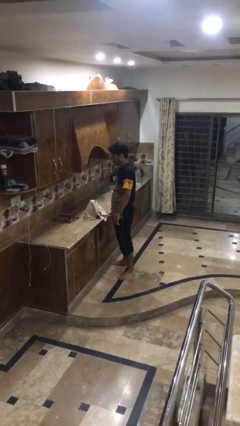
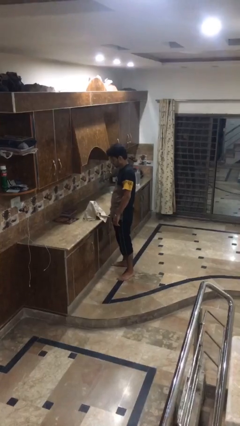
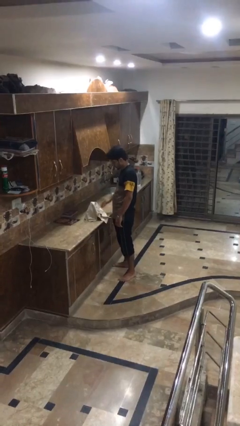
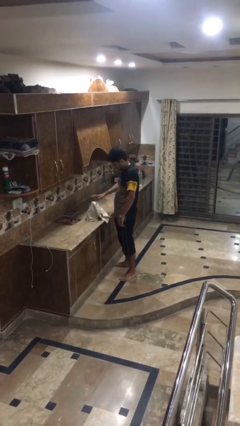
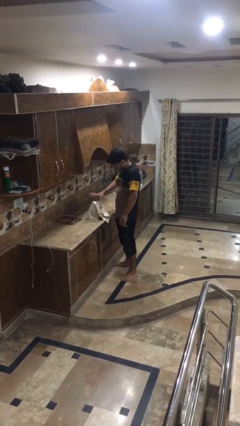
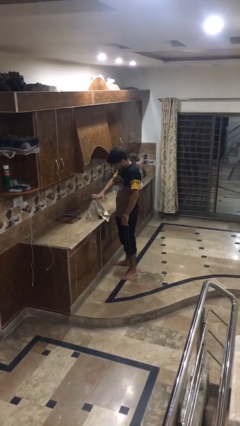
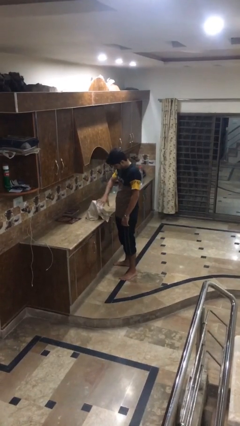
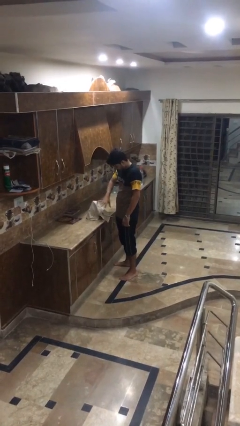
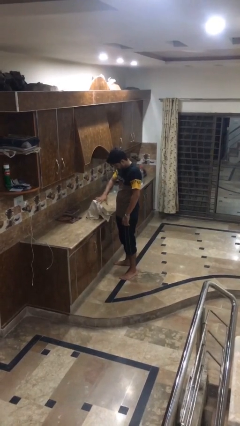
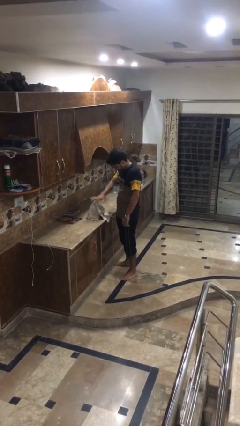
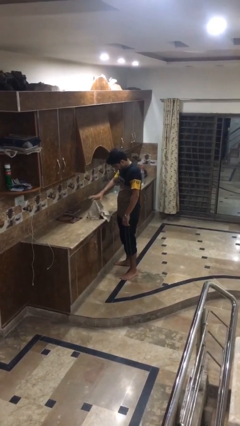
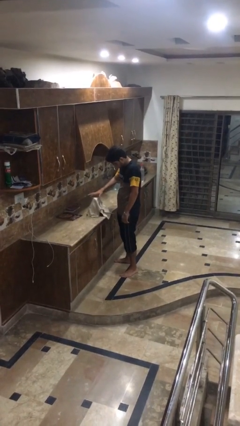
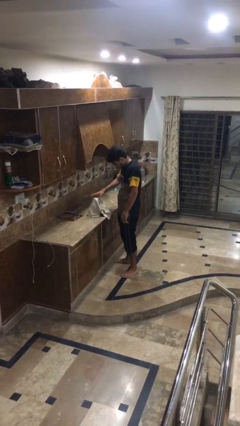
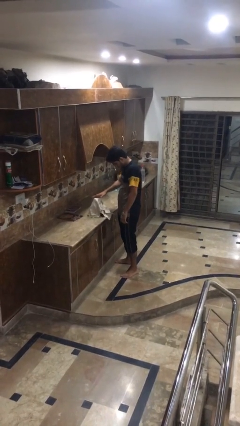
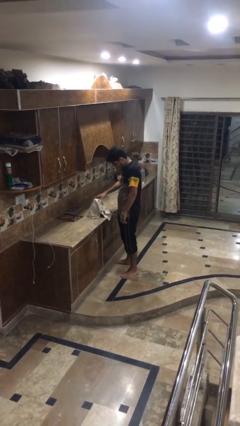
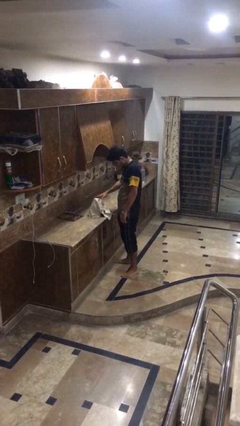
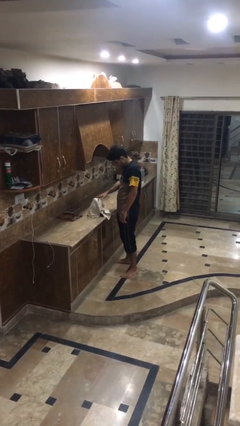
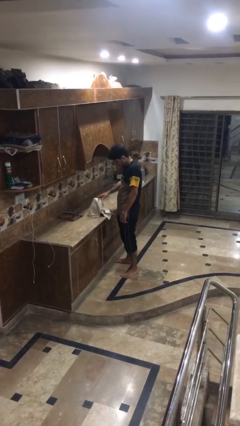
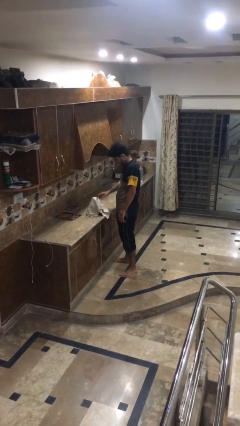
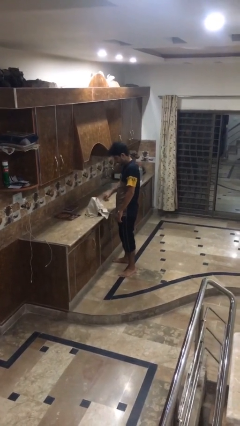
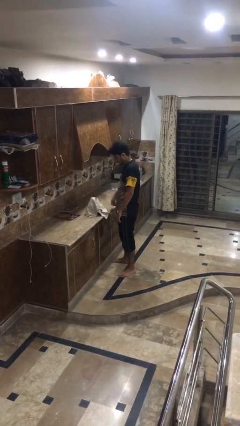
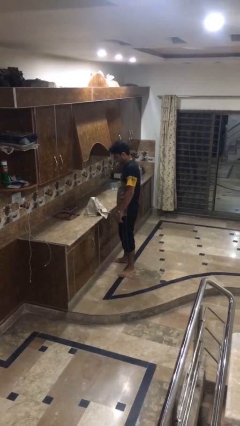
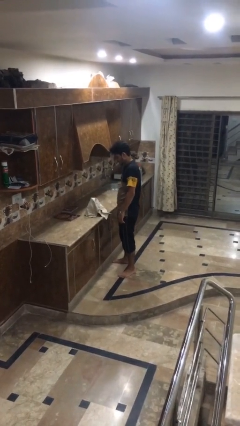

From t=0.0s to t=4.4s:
person waves hand over object

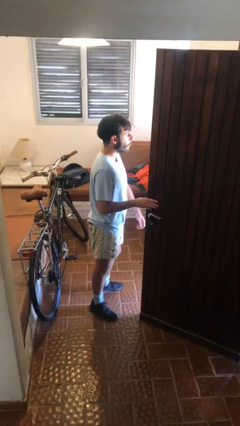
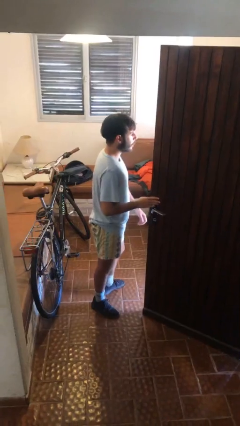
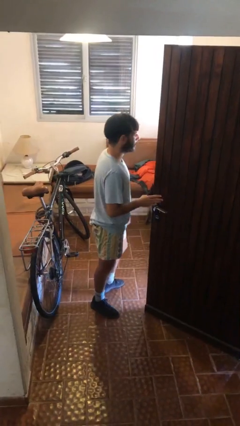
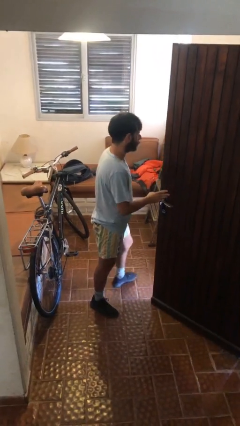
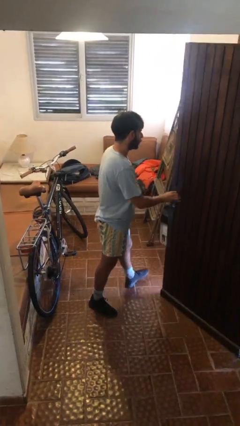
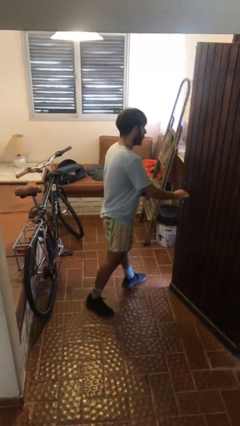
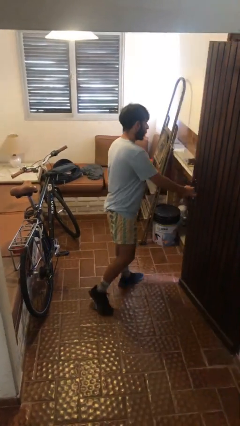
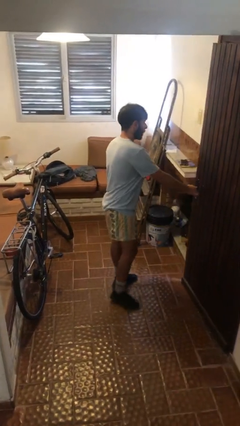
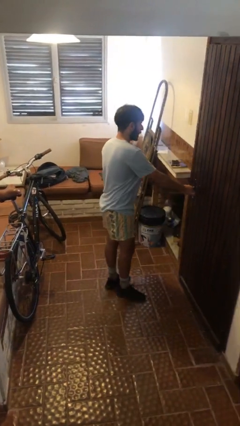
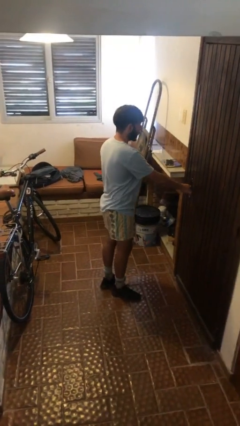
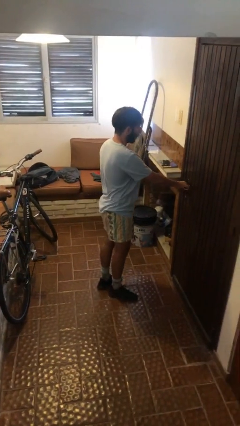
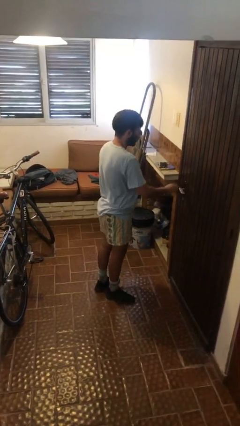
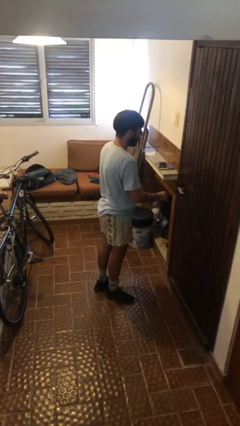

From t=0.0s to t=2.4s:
person closes facility door

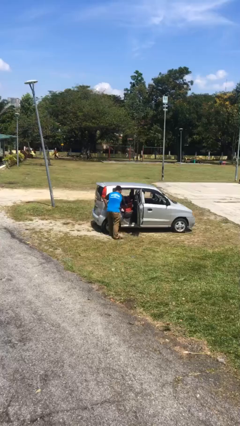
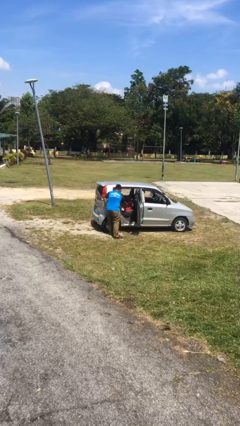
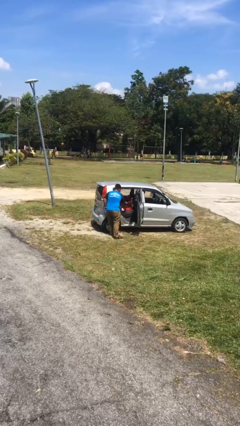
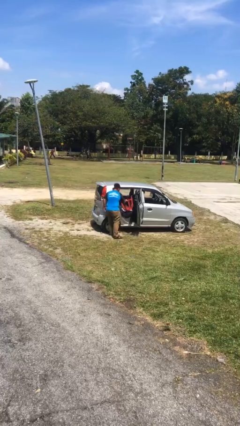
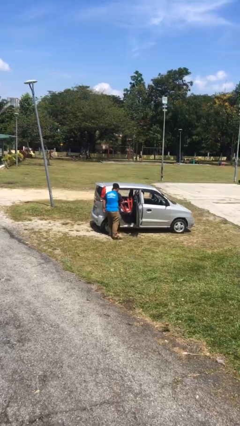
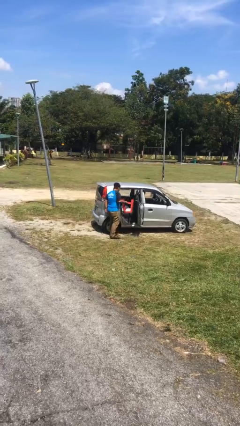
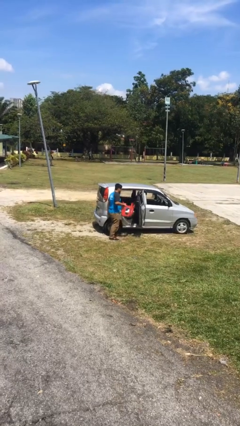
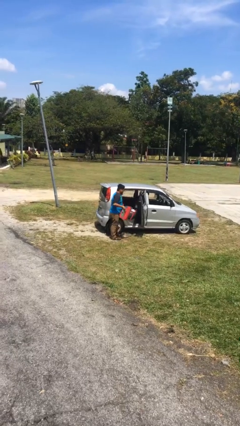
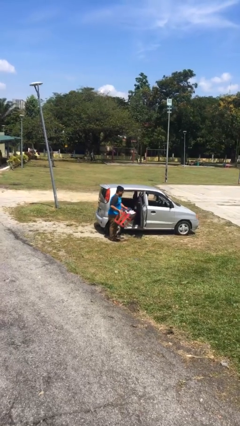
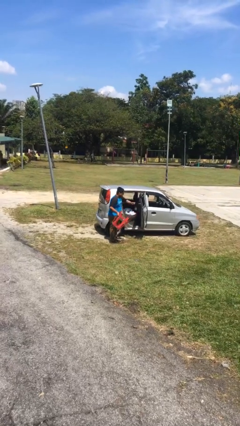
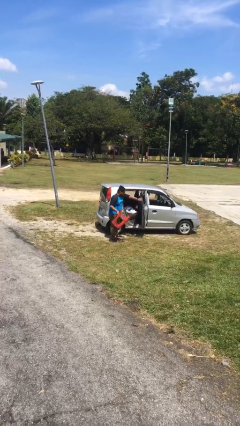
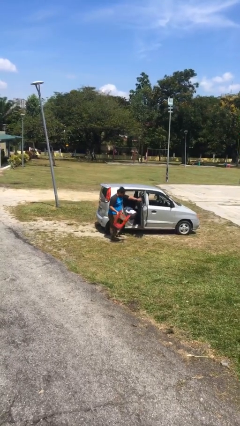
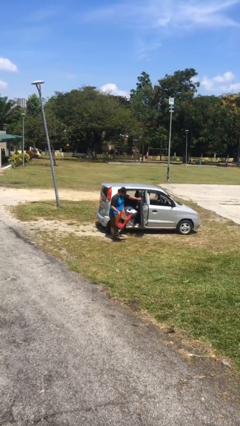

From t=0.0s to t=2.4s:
person unloads car

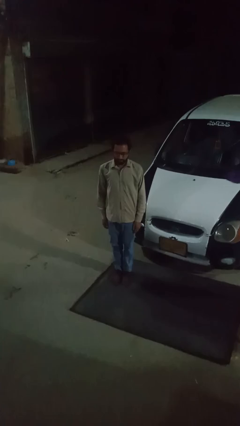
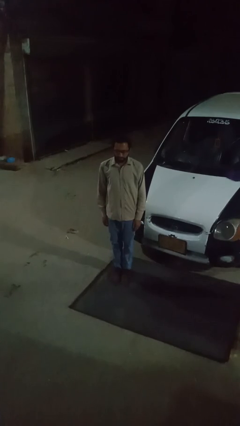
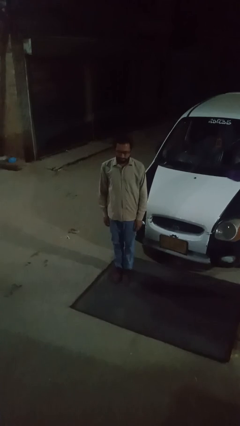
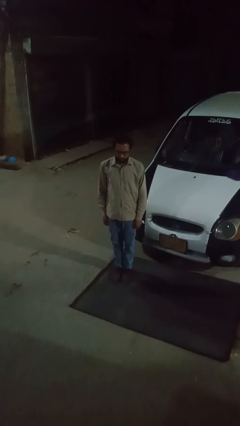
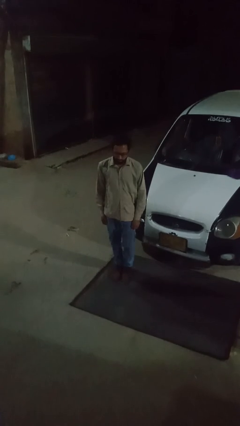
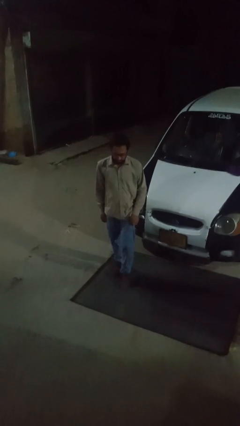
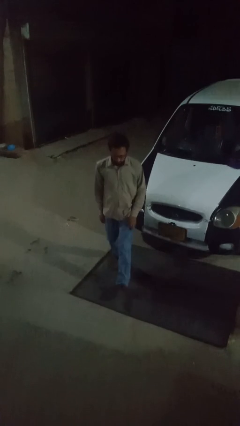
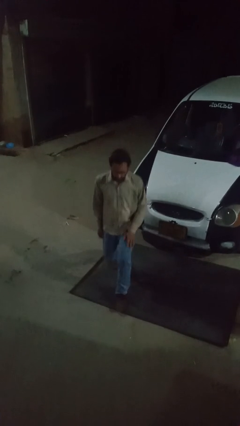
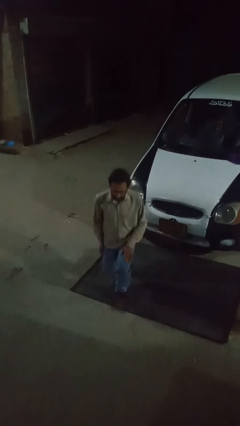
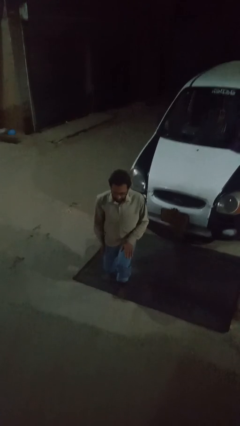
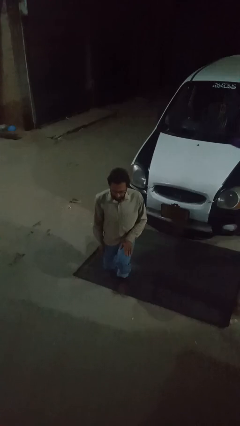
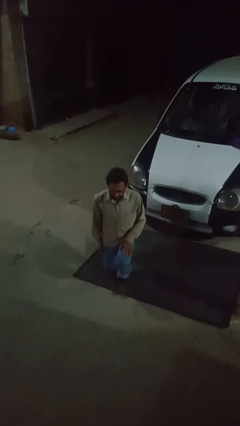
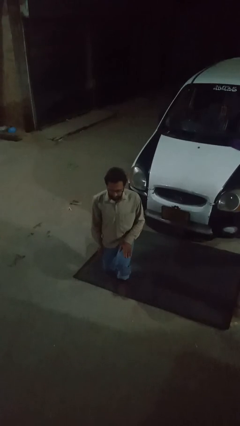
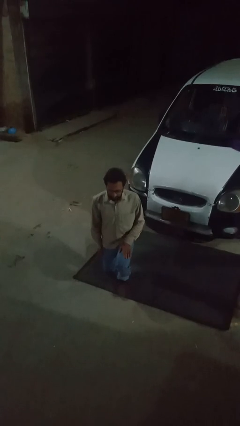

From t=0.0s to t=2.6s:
person squats

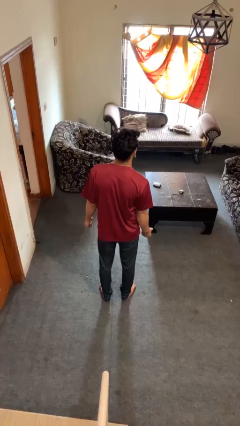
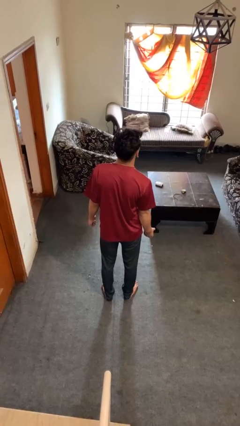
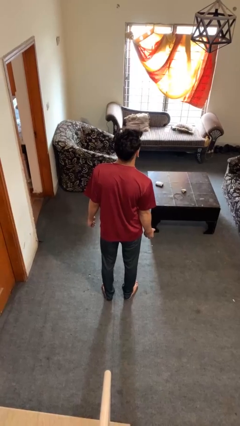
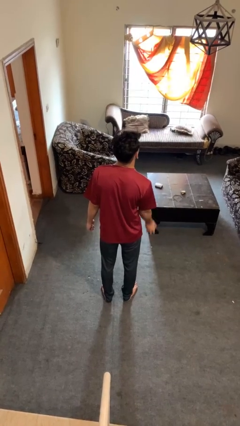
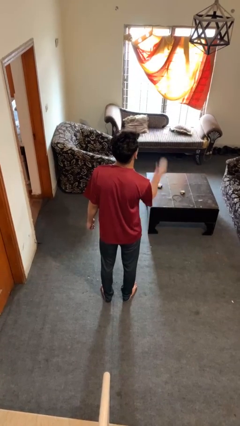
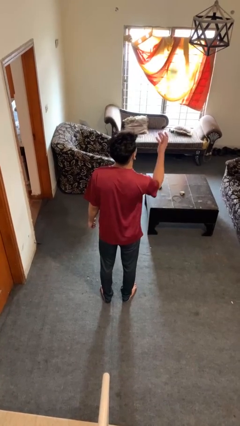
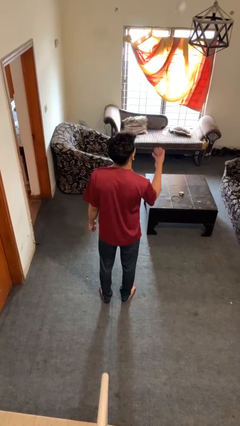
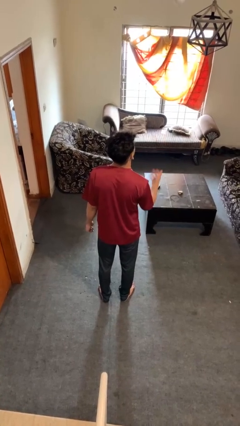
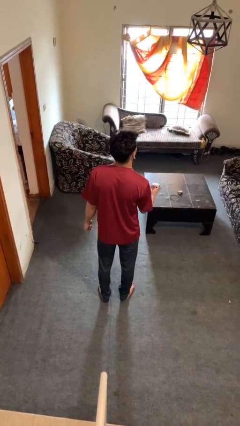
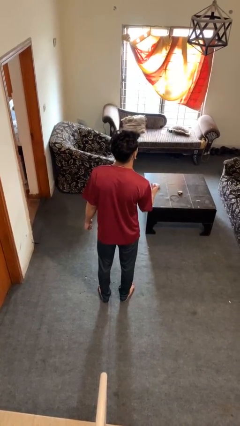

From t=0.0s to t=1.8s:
person drops object

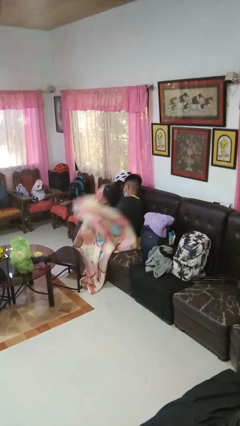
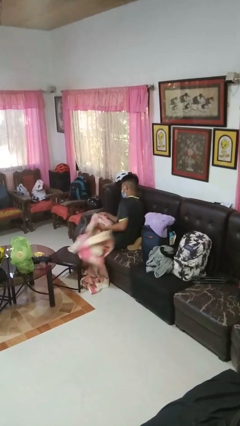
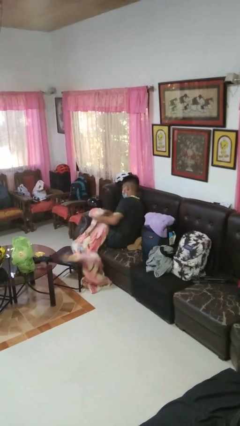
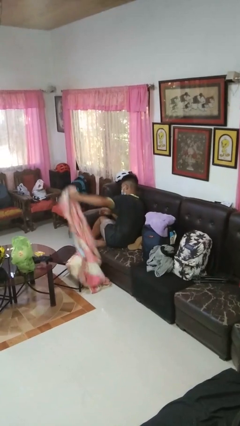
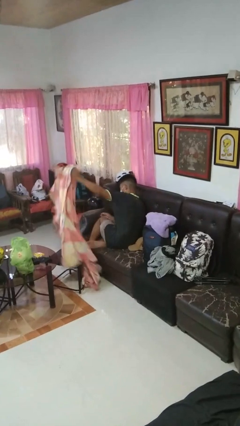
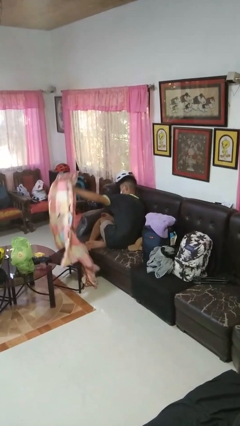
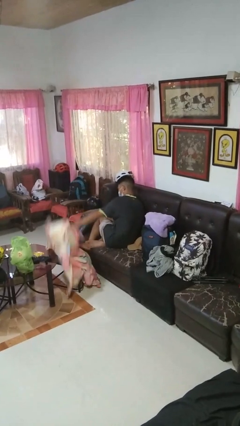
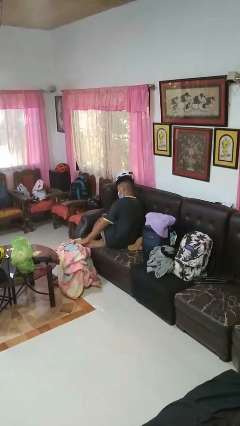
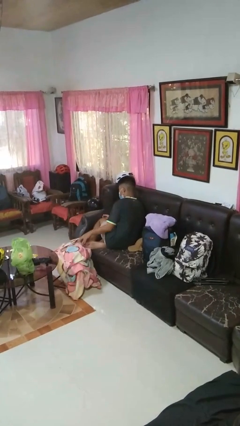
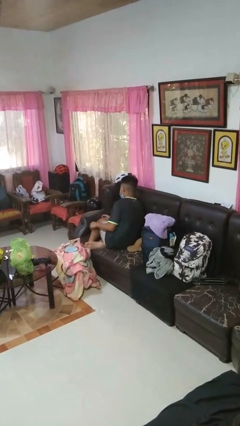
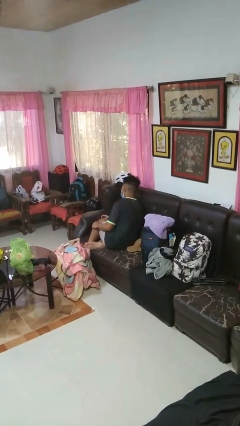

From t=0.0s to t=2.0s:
person uncovers with blanket

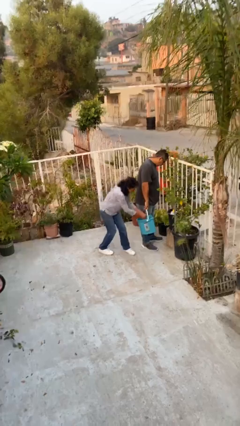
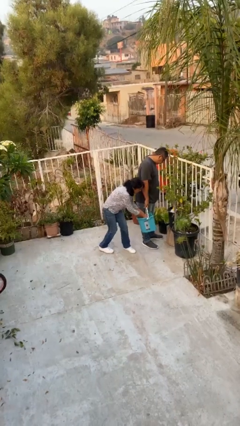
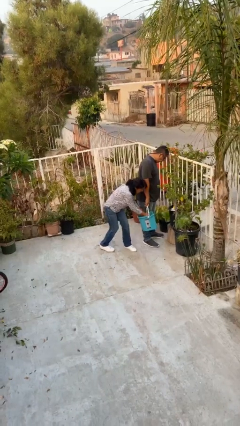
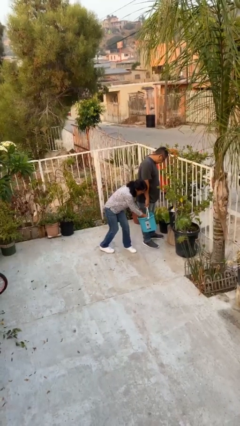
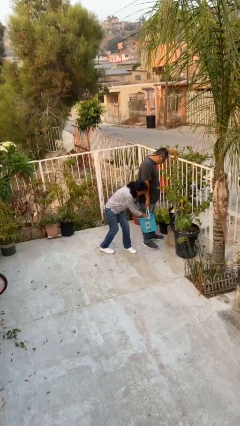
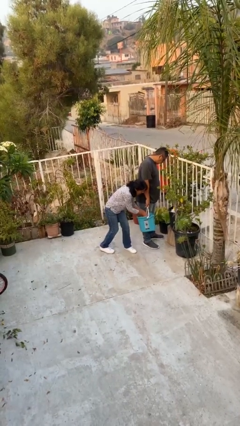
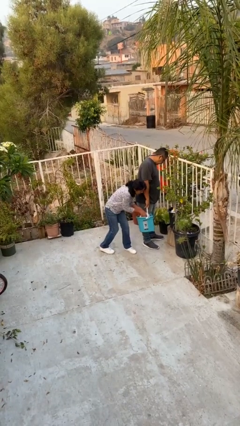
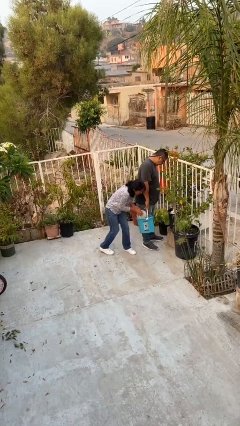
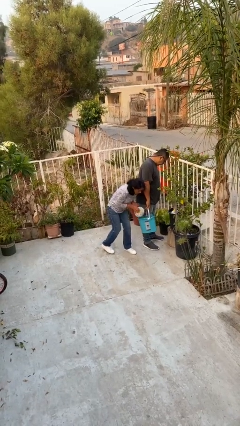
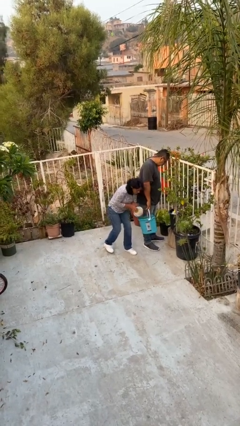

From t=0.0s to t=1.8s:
person steals object from person
